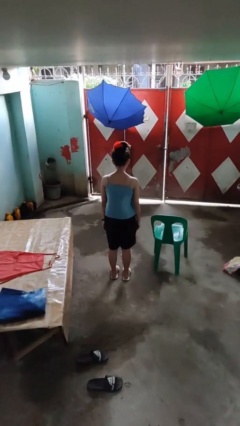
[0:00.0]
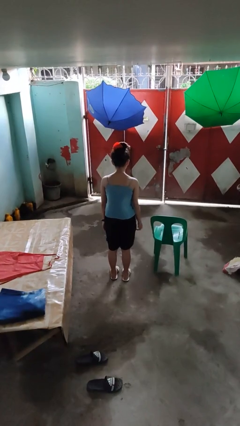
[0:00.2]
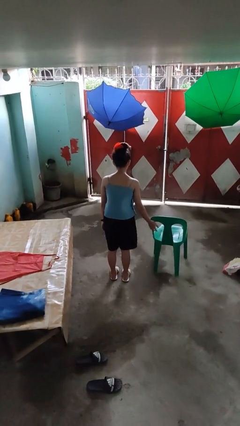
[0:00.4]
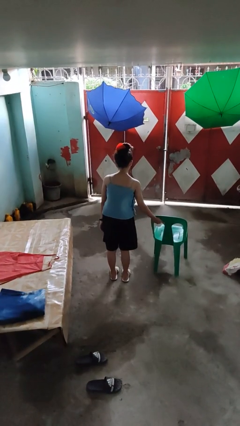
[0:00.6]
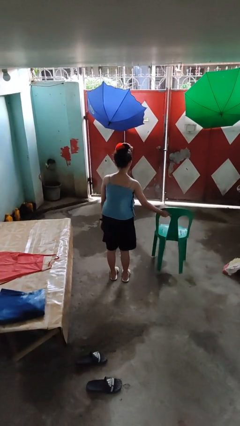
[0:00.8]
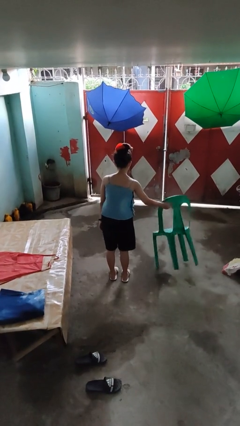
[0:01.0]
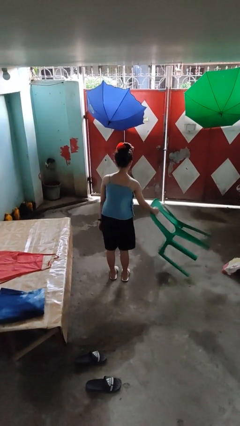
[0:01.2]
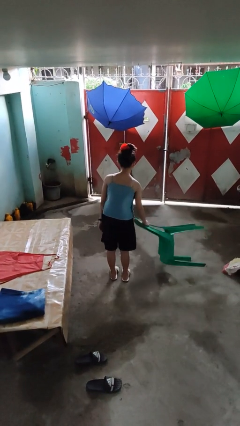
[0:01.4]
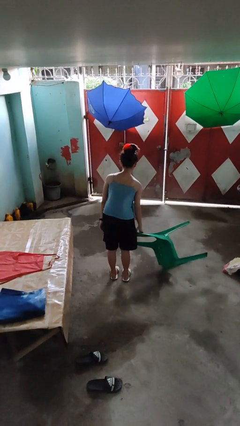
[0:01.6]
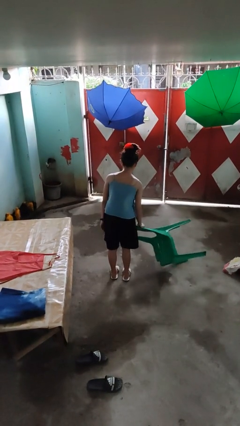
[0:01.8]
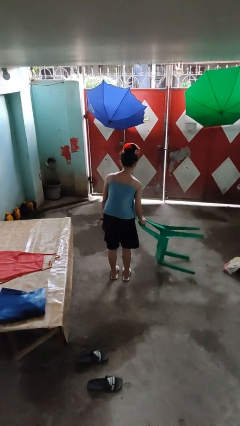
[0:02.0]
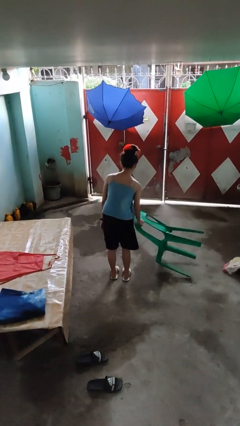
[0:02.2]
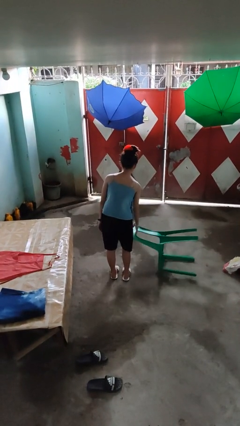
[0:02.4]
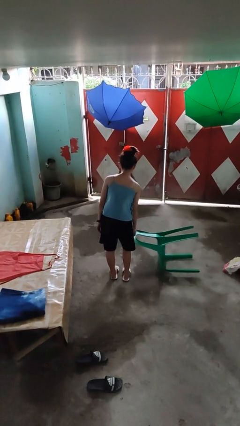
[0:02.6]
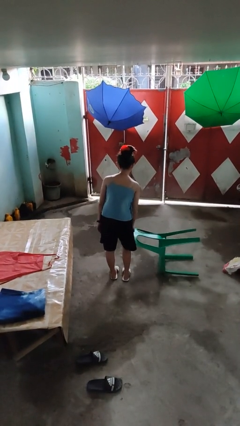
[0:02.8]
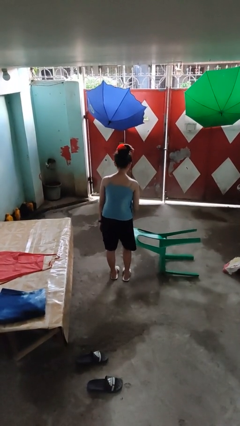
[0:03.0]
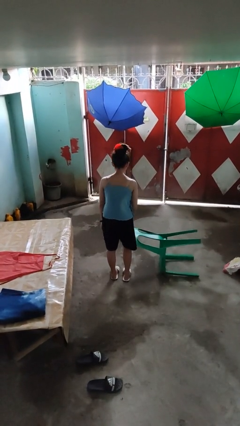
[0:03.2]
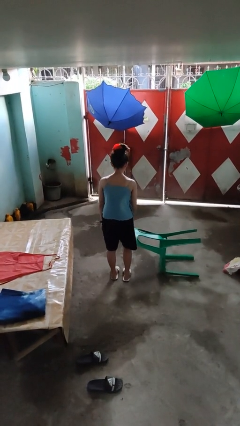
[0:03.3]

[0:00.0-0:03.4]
person knocks over furniture

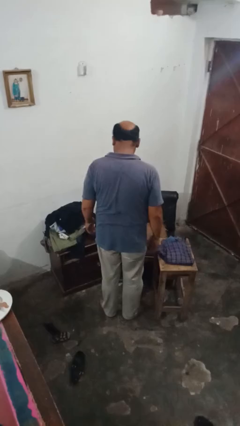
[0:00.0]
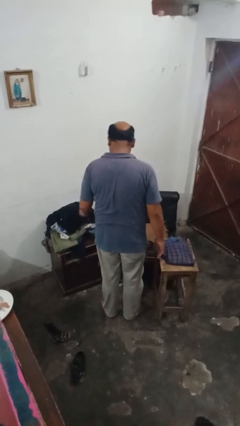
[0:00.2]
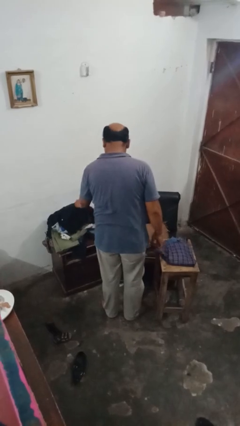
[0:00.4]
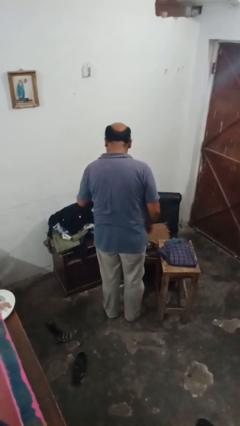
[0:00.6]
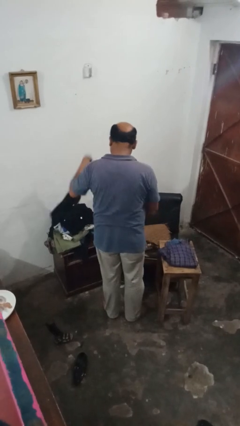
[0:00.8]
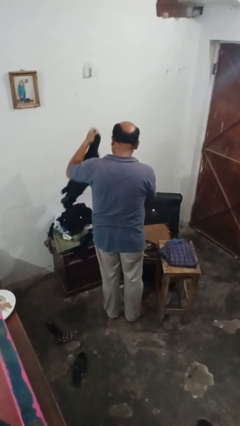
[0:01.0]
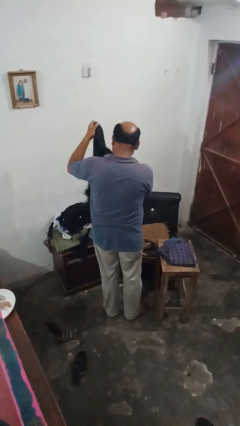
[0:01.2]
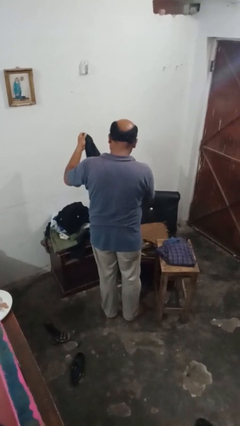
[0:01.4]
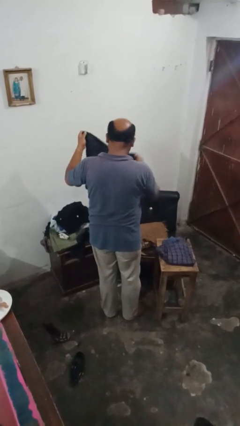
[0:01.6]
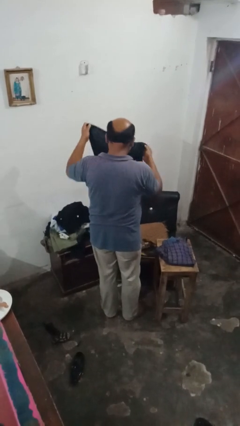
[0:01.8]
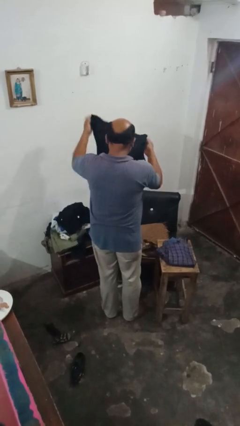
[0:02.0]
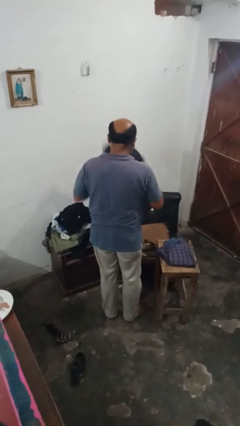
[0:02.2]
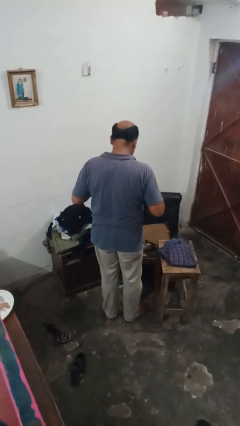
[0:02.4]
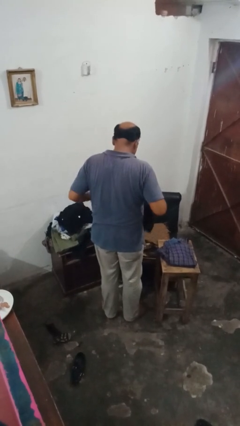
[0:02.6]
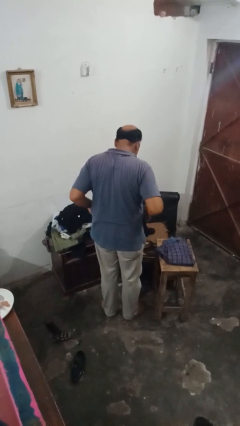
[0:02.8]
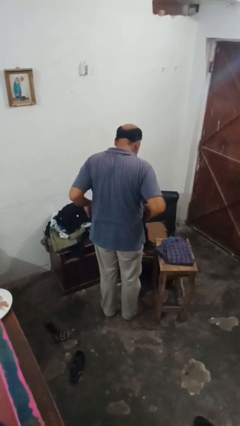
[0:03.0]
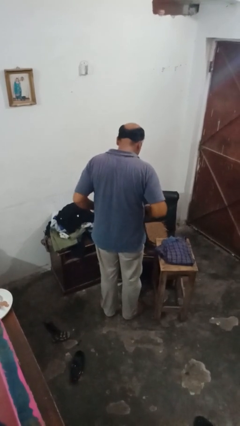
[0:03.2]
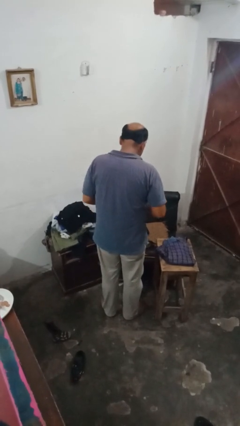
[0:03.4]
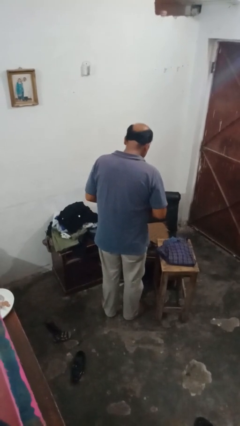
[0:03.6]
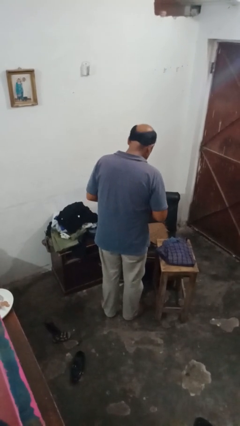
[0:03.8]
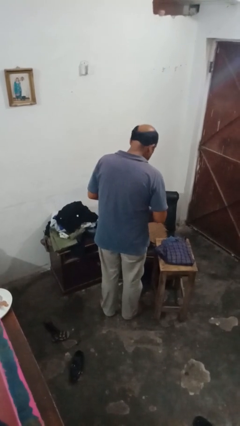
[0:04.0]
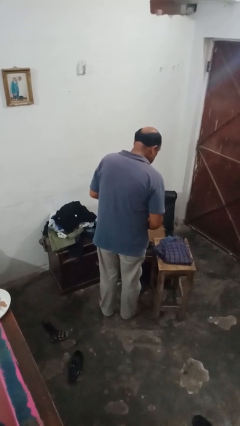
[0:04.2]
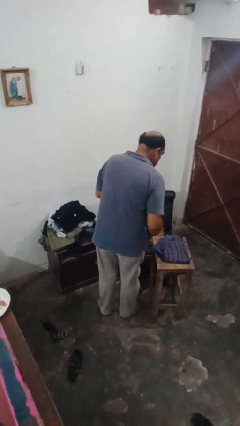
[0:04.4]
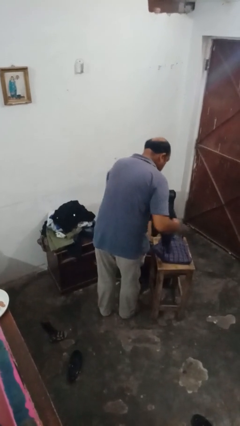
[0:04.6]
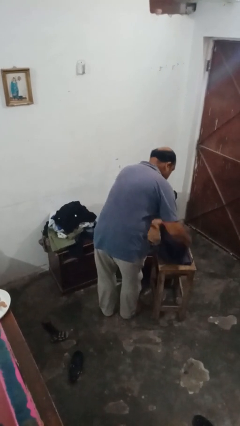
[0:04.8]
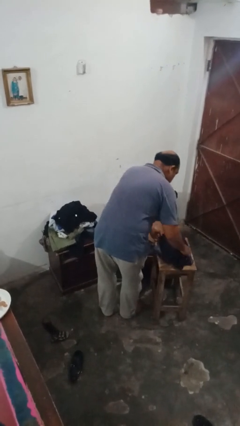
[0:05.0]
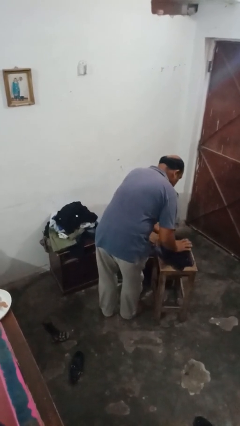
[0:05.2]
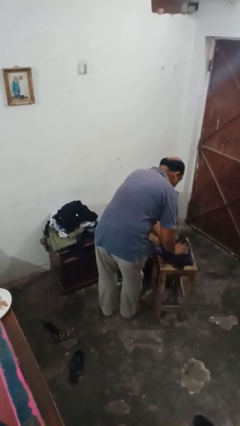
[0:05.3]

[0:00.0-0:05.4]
person folds shirt

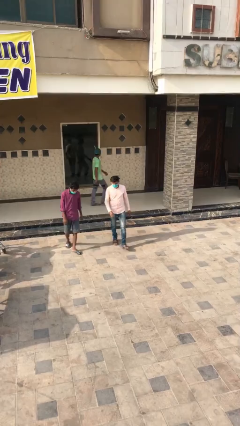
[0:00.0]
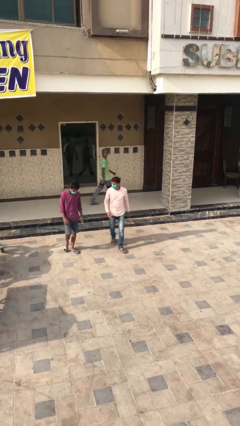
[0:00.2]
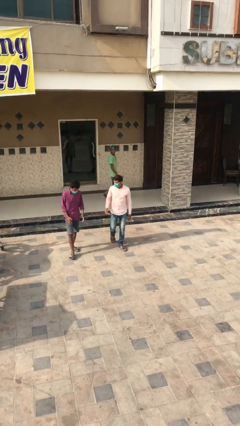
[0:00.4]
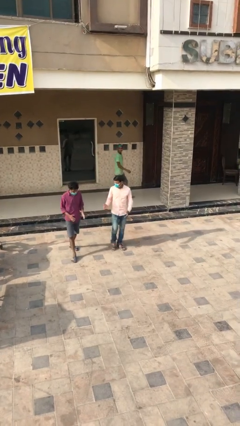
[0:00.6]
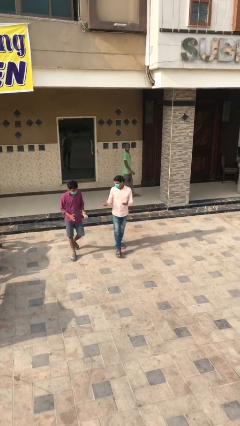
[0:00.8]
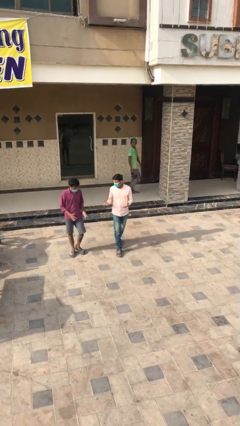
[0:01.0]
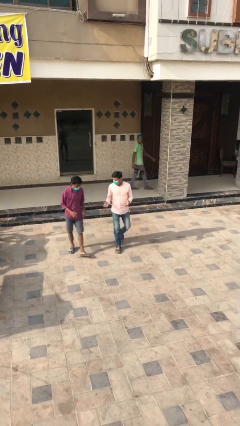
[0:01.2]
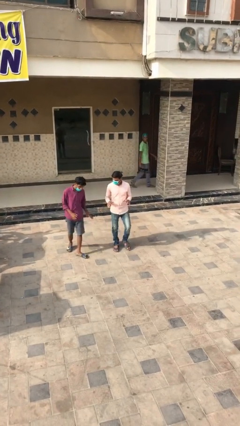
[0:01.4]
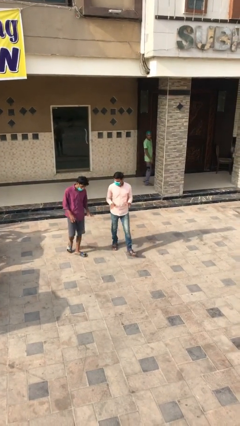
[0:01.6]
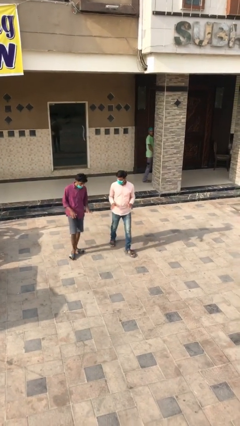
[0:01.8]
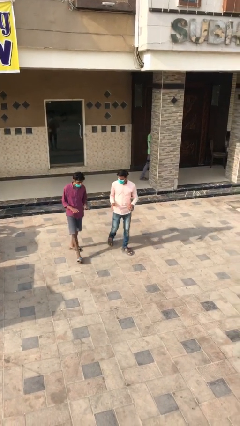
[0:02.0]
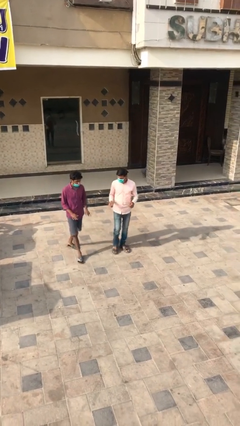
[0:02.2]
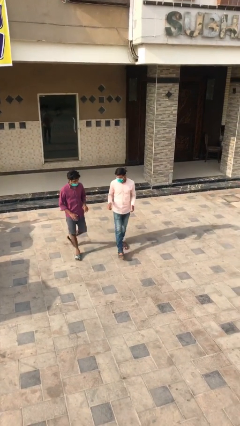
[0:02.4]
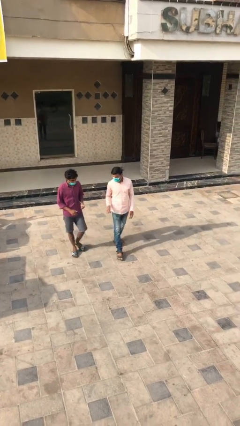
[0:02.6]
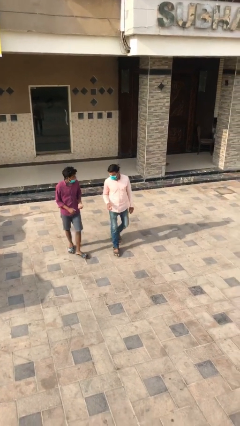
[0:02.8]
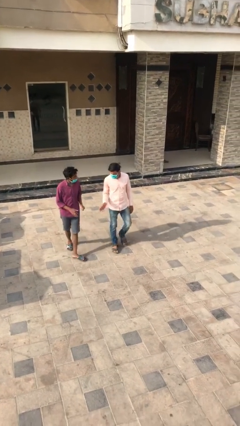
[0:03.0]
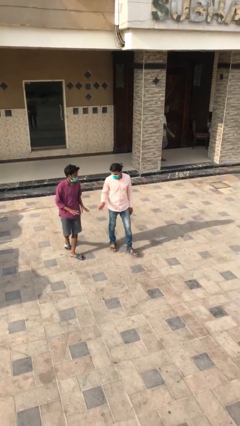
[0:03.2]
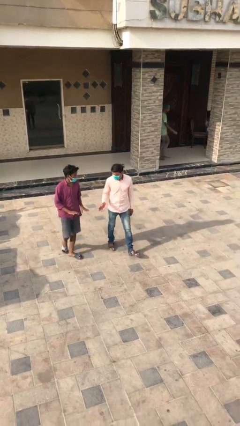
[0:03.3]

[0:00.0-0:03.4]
person talks to person

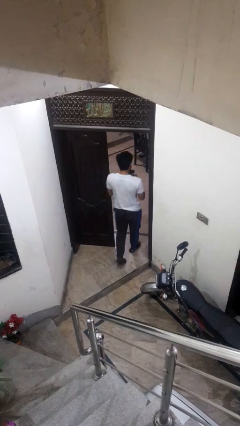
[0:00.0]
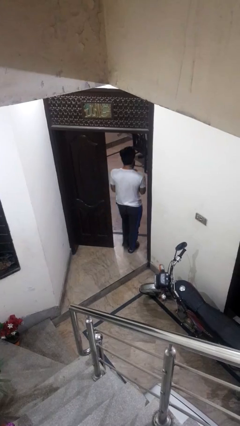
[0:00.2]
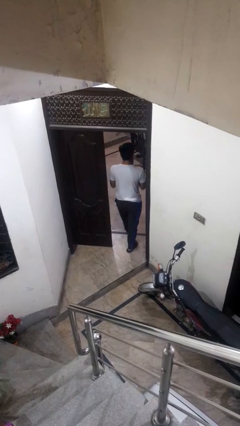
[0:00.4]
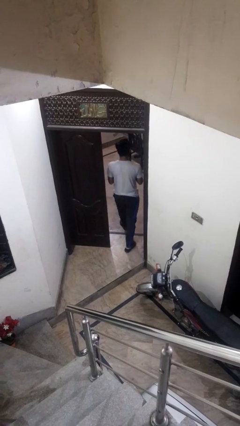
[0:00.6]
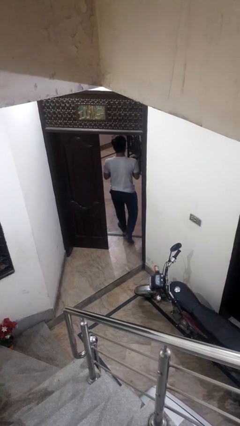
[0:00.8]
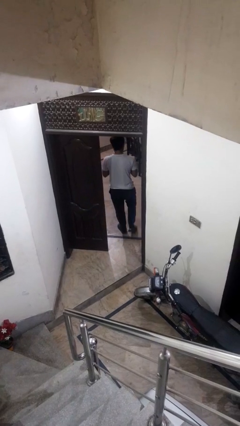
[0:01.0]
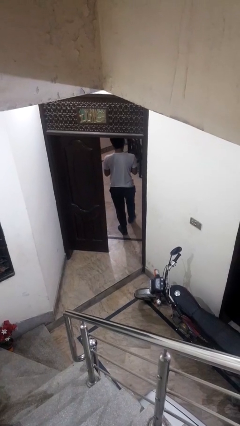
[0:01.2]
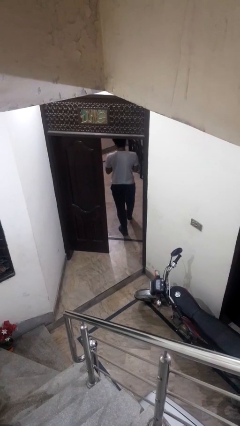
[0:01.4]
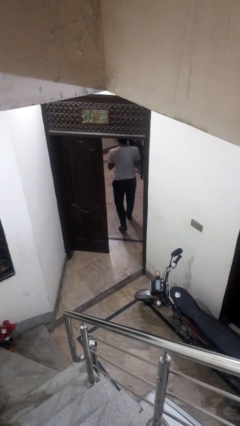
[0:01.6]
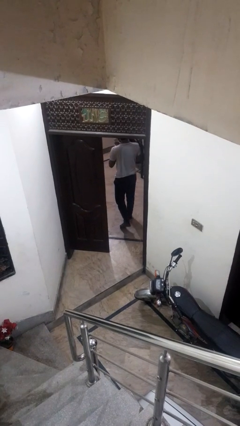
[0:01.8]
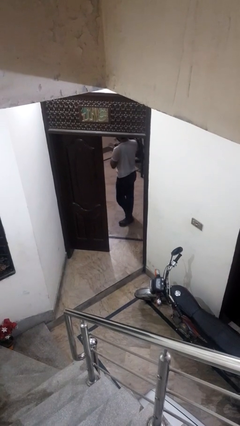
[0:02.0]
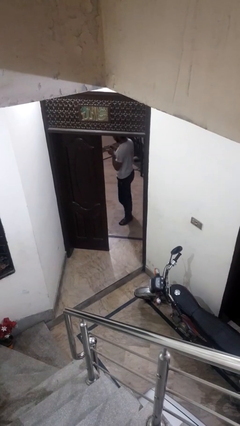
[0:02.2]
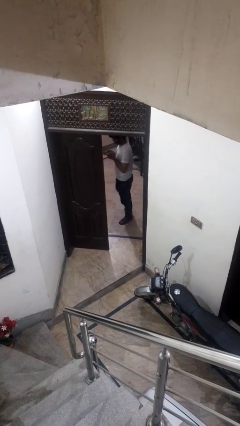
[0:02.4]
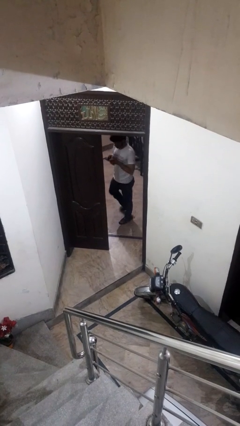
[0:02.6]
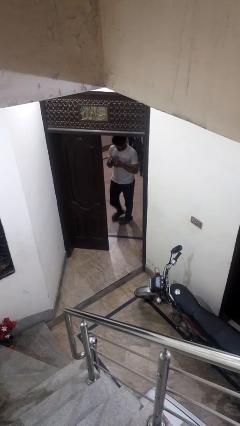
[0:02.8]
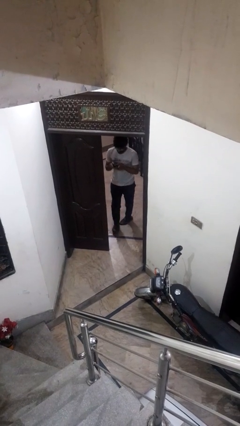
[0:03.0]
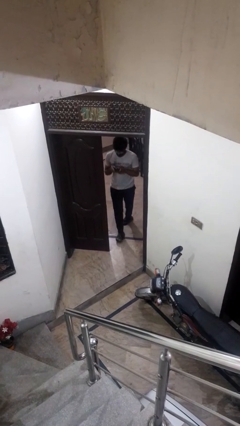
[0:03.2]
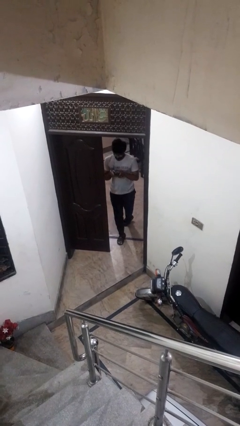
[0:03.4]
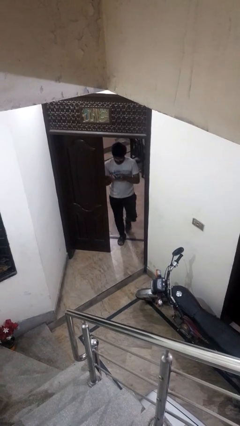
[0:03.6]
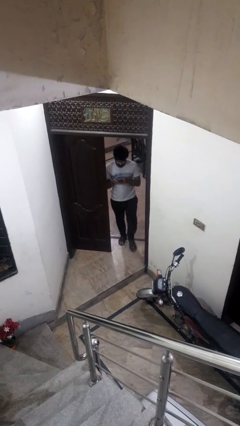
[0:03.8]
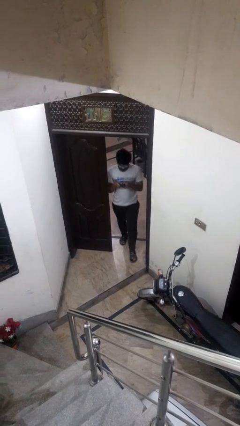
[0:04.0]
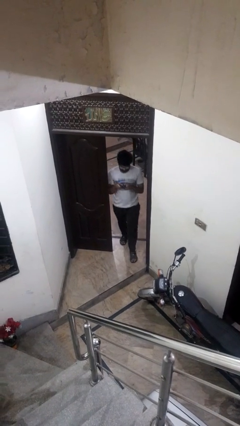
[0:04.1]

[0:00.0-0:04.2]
person exits scene through structure

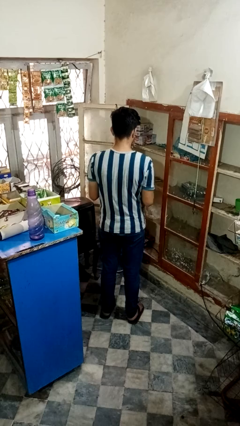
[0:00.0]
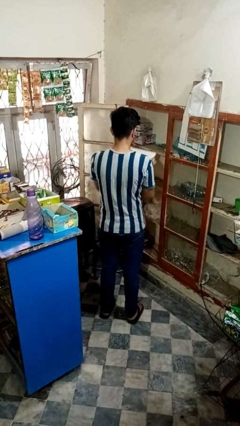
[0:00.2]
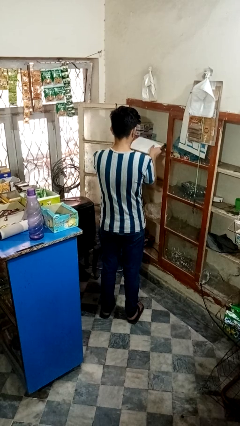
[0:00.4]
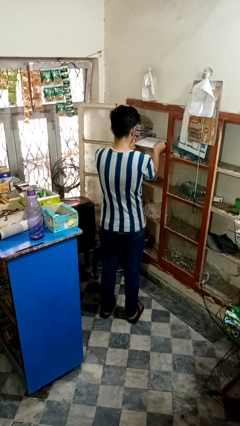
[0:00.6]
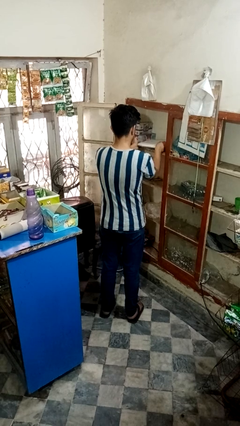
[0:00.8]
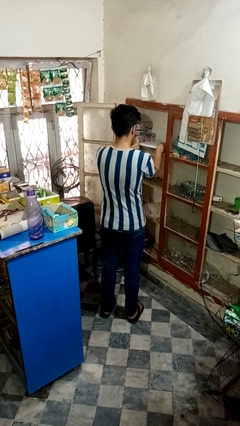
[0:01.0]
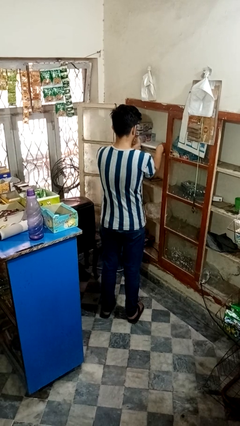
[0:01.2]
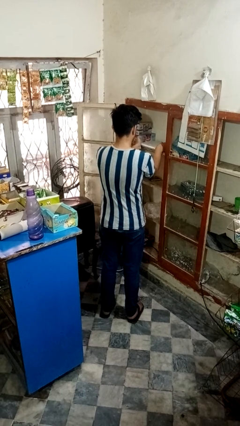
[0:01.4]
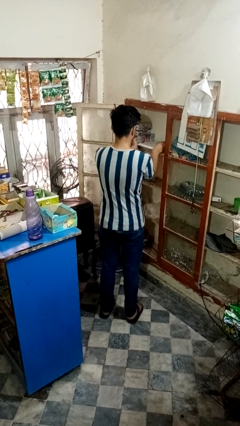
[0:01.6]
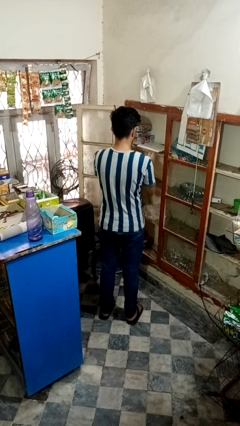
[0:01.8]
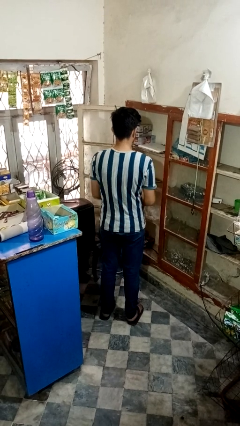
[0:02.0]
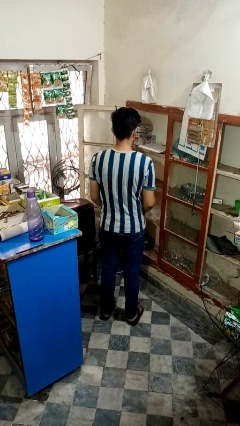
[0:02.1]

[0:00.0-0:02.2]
person puts down object into cabinet
